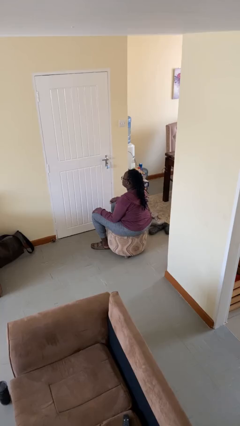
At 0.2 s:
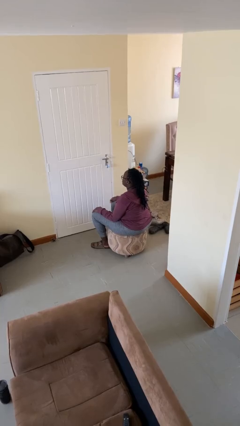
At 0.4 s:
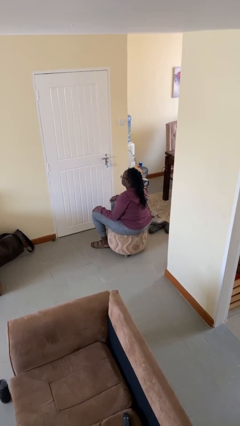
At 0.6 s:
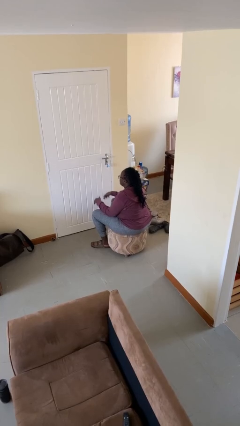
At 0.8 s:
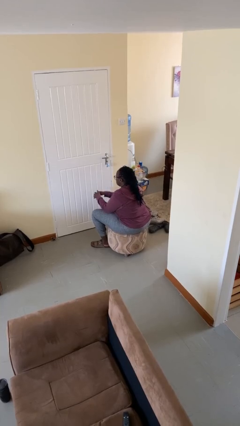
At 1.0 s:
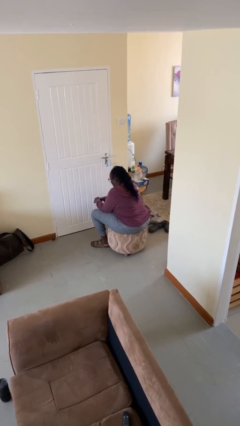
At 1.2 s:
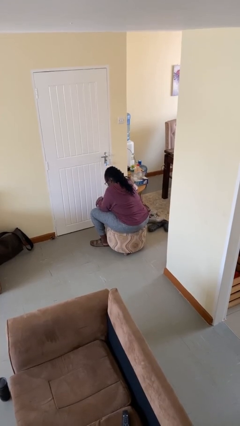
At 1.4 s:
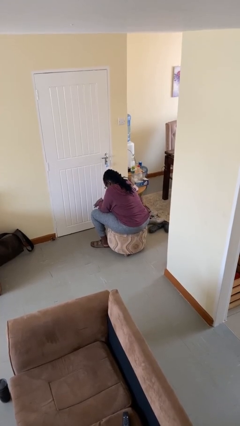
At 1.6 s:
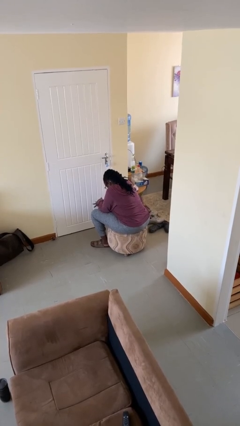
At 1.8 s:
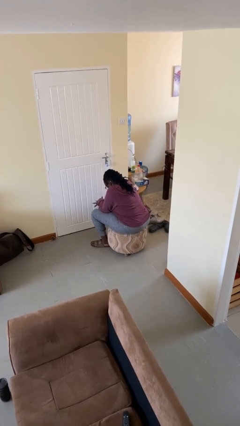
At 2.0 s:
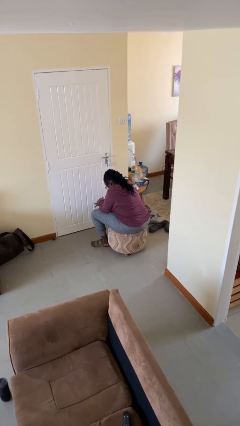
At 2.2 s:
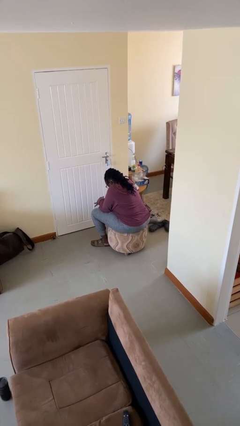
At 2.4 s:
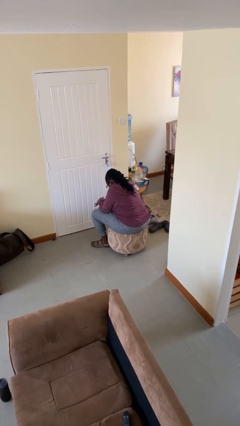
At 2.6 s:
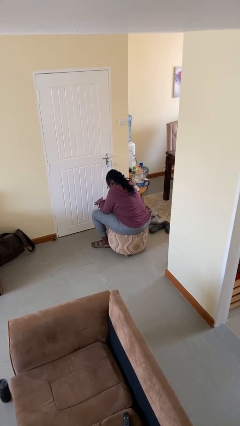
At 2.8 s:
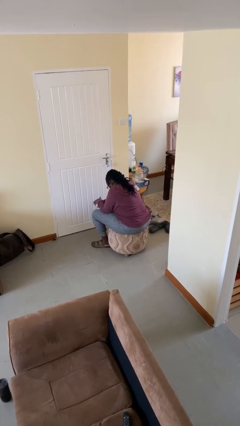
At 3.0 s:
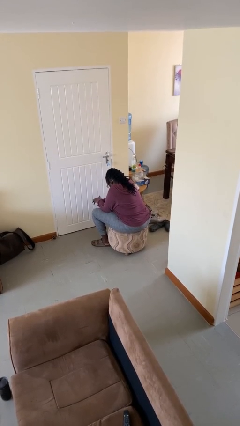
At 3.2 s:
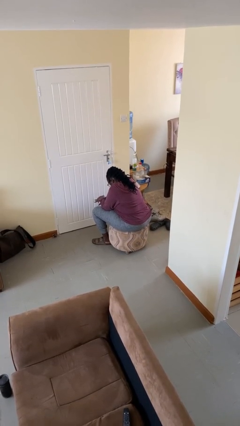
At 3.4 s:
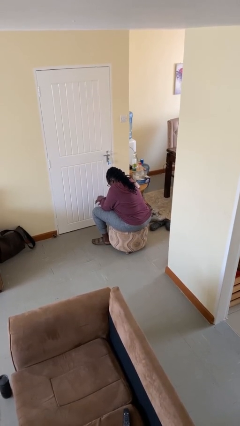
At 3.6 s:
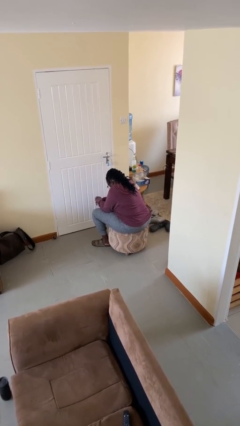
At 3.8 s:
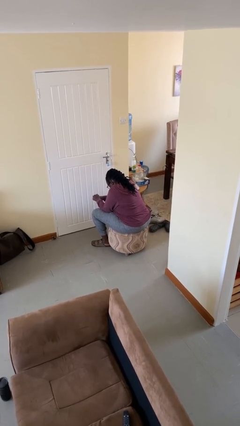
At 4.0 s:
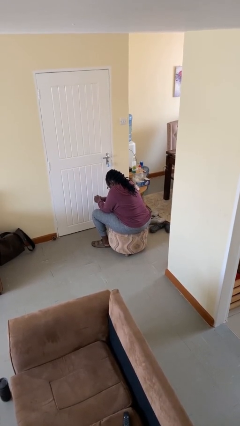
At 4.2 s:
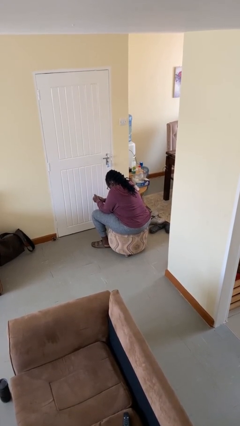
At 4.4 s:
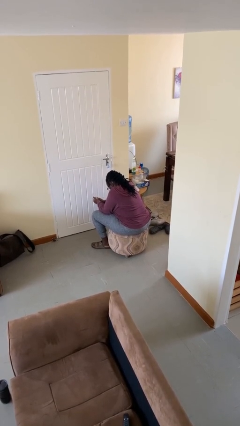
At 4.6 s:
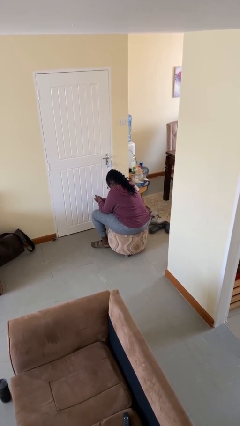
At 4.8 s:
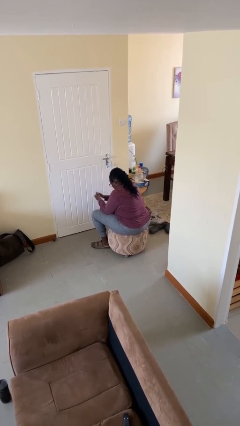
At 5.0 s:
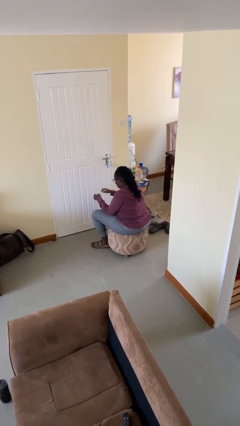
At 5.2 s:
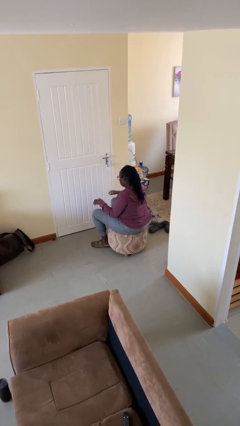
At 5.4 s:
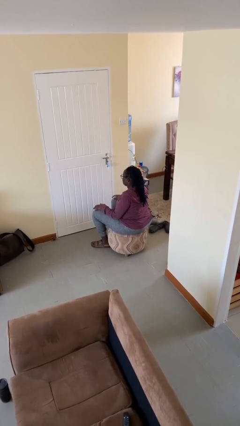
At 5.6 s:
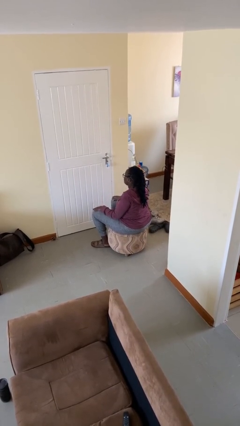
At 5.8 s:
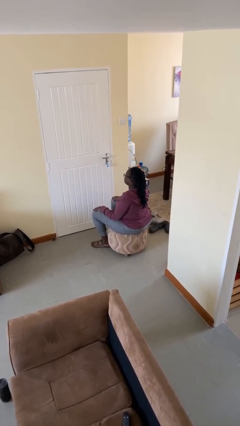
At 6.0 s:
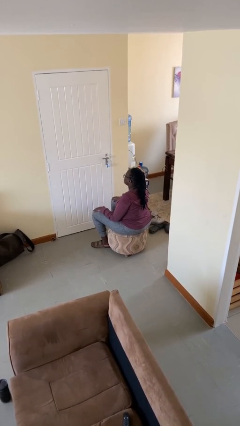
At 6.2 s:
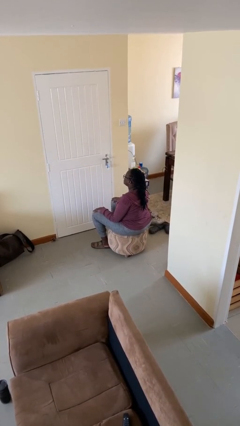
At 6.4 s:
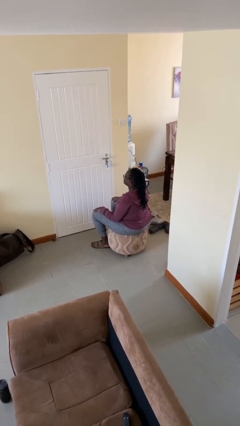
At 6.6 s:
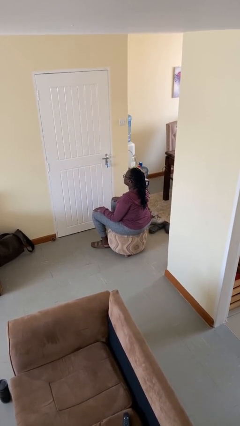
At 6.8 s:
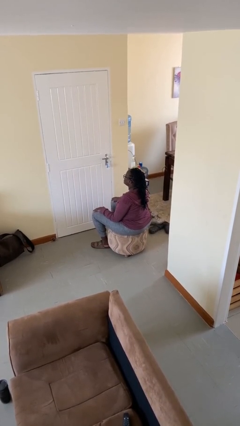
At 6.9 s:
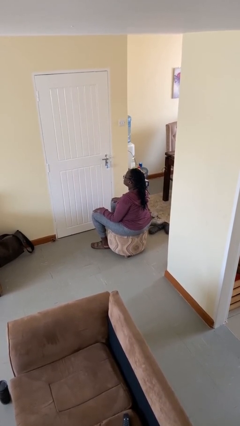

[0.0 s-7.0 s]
person looks at hands in lap

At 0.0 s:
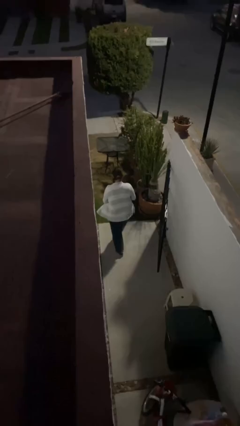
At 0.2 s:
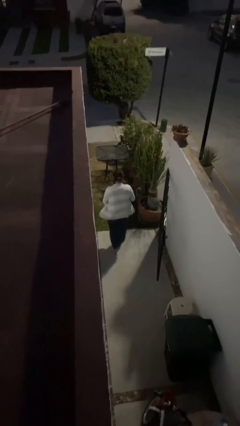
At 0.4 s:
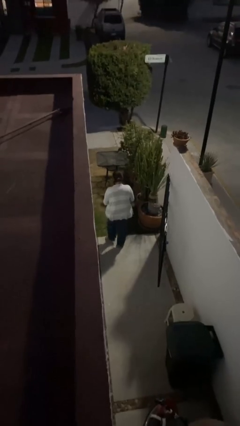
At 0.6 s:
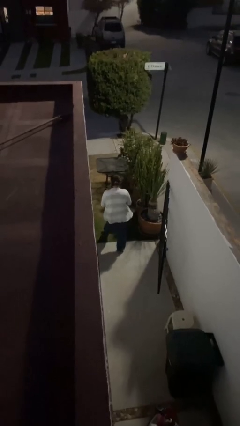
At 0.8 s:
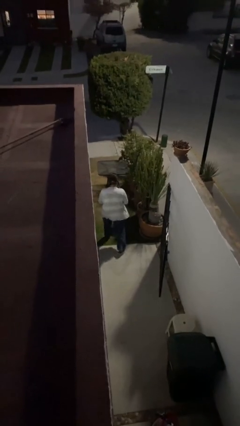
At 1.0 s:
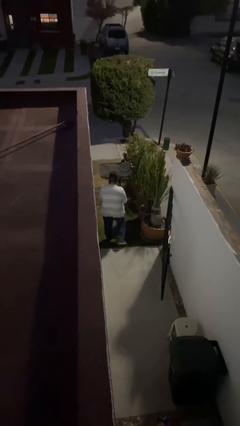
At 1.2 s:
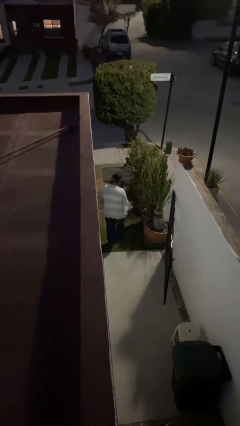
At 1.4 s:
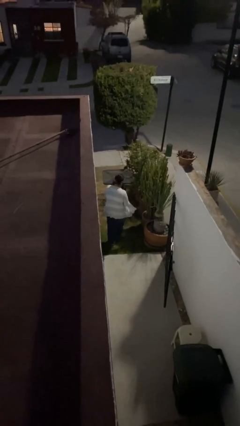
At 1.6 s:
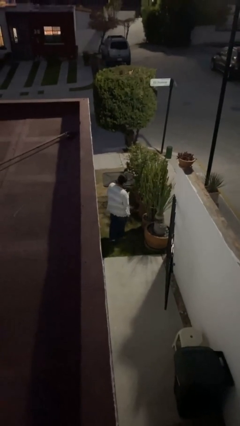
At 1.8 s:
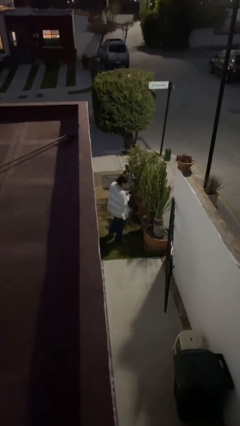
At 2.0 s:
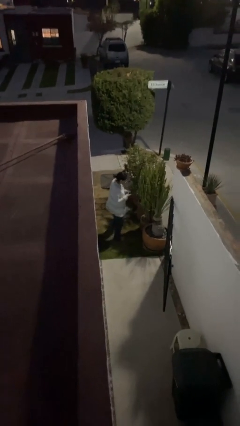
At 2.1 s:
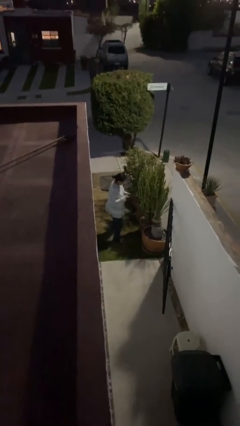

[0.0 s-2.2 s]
person exits scene through structure

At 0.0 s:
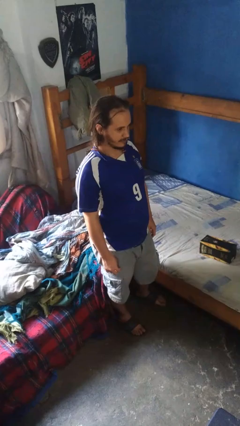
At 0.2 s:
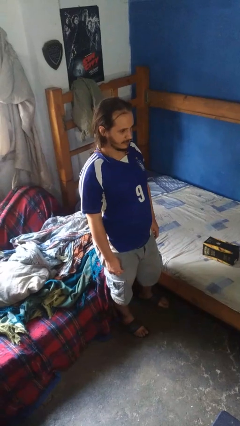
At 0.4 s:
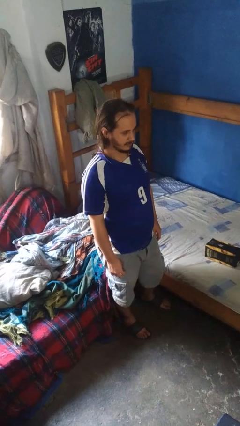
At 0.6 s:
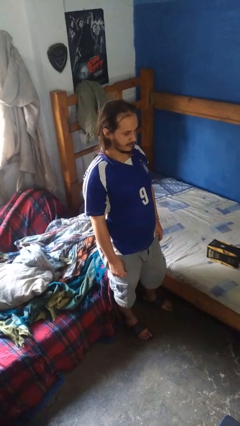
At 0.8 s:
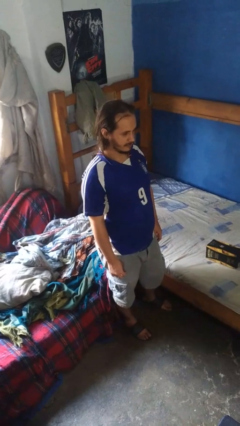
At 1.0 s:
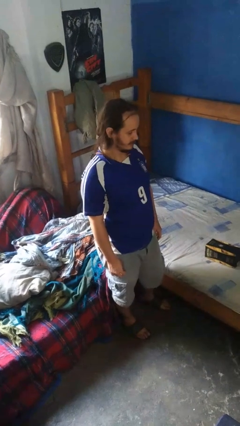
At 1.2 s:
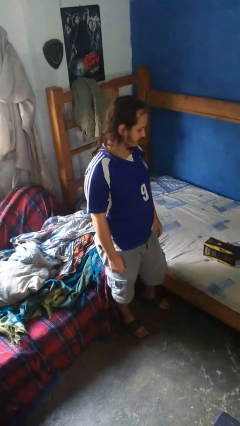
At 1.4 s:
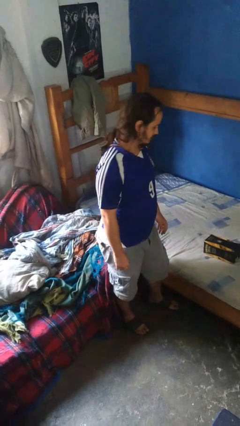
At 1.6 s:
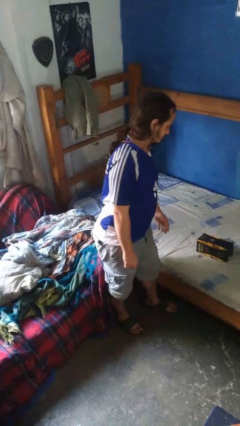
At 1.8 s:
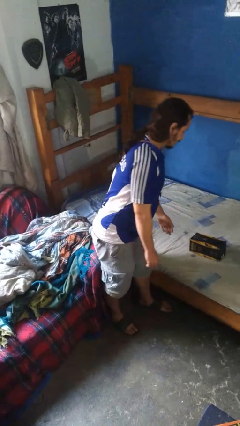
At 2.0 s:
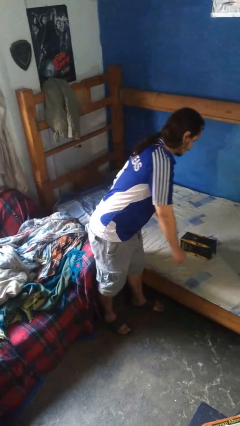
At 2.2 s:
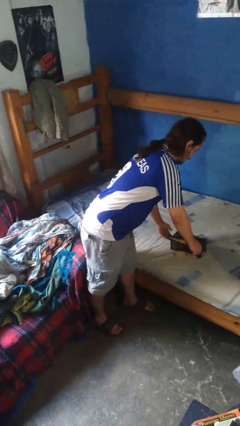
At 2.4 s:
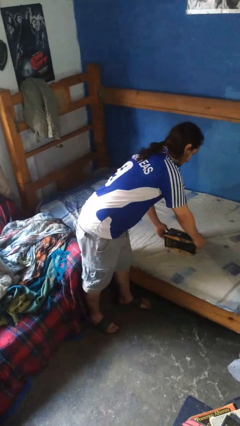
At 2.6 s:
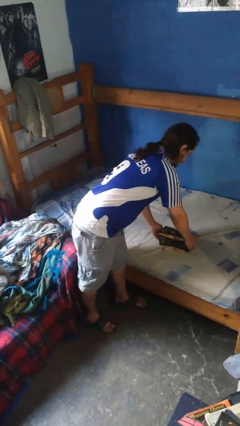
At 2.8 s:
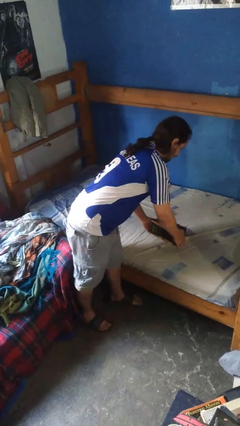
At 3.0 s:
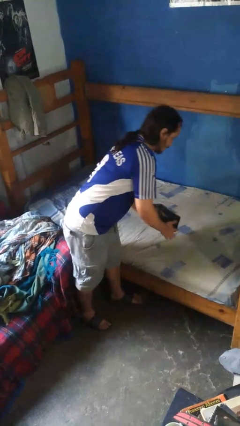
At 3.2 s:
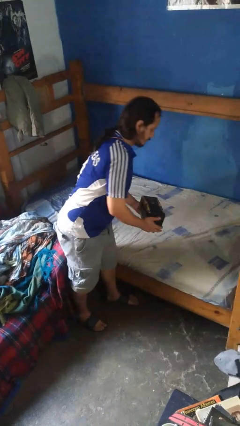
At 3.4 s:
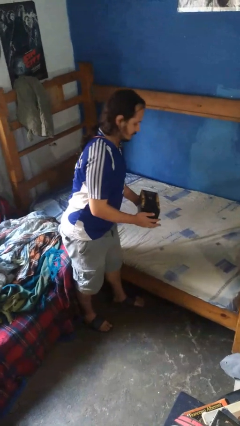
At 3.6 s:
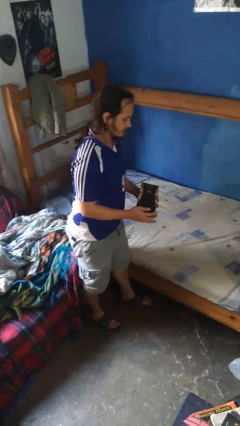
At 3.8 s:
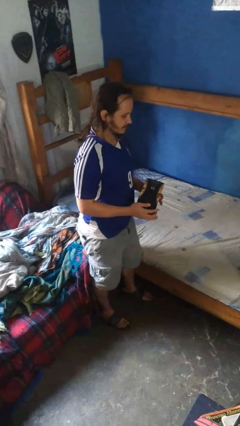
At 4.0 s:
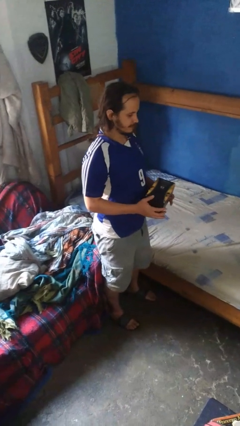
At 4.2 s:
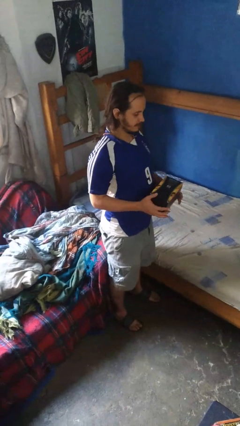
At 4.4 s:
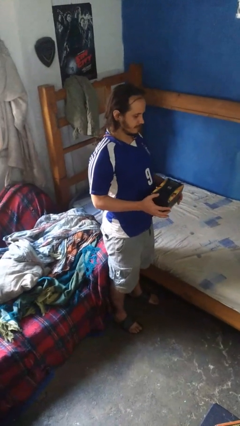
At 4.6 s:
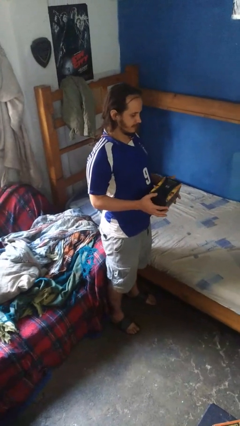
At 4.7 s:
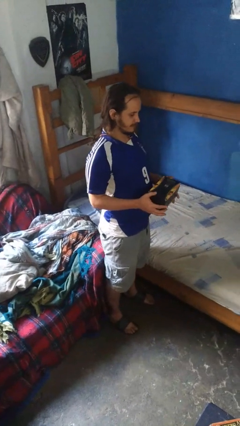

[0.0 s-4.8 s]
person picks up object from bed

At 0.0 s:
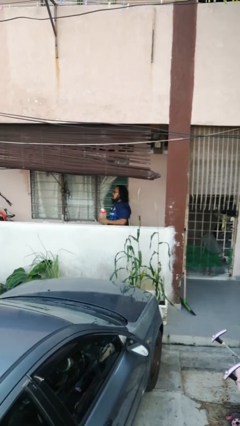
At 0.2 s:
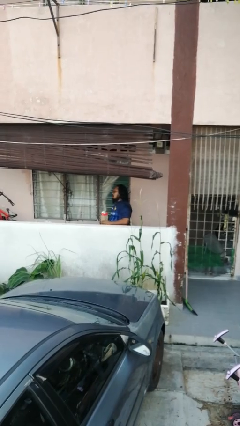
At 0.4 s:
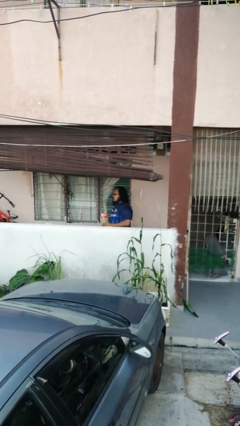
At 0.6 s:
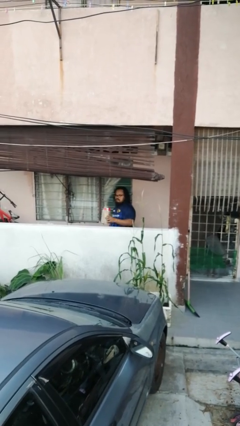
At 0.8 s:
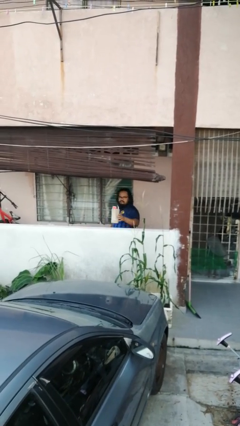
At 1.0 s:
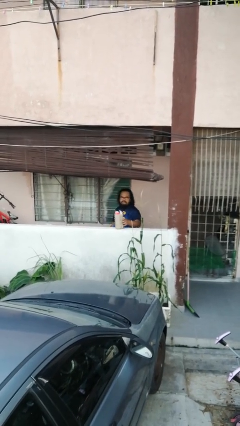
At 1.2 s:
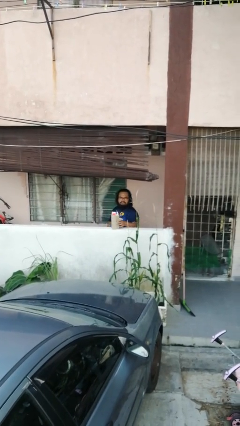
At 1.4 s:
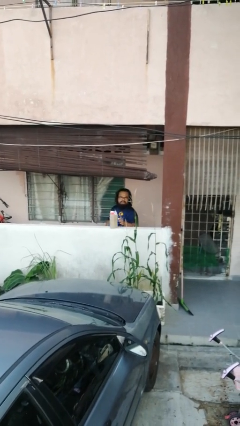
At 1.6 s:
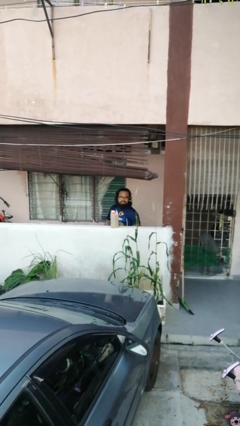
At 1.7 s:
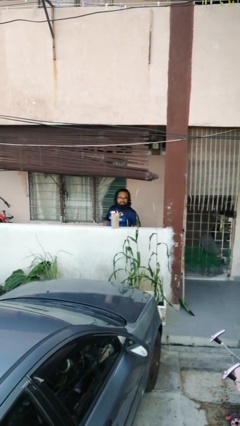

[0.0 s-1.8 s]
person puts down object on countertop

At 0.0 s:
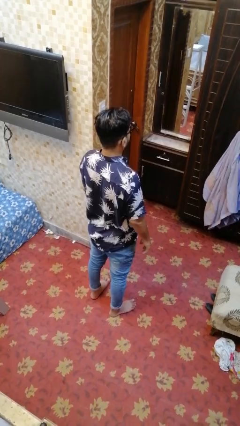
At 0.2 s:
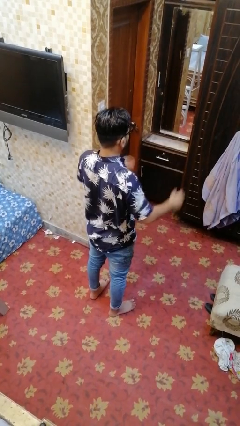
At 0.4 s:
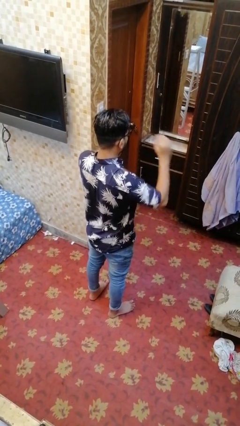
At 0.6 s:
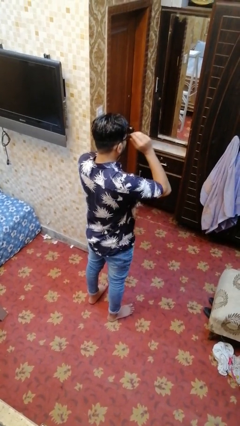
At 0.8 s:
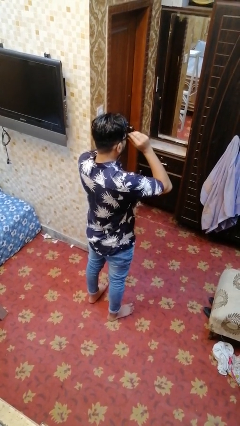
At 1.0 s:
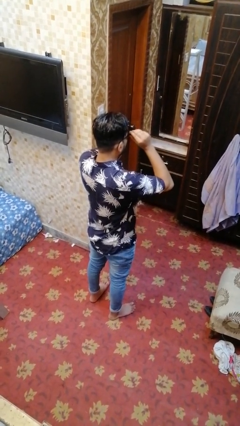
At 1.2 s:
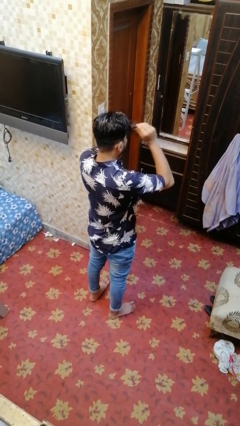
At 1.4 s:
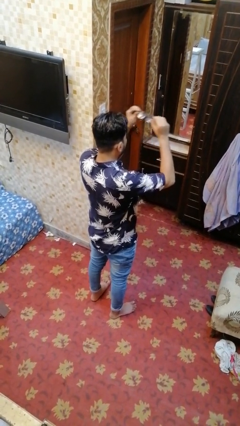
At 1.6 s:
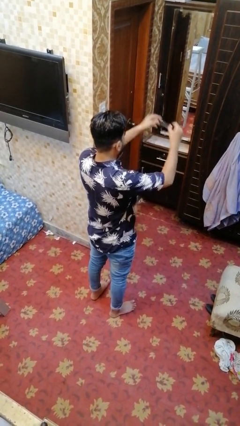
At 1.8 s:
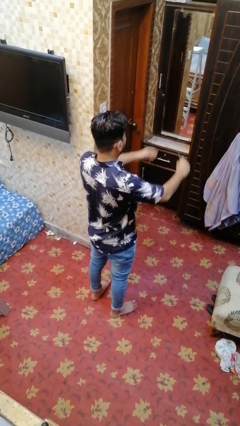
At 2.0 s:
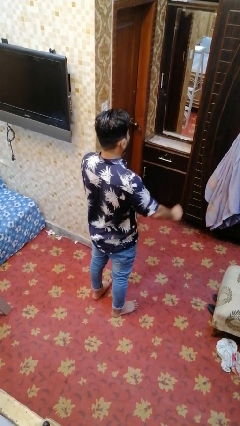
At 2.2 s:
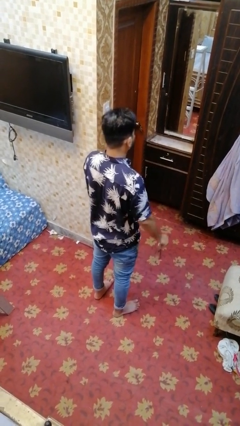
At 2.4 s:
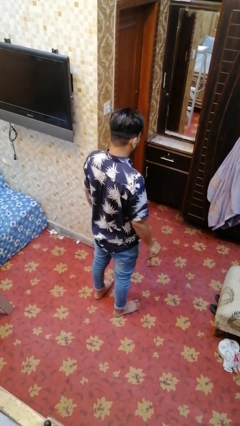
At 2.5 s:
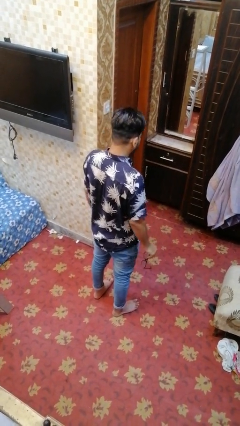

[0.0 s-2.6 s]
person takes off glasses
